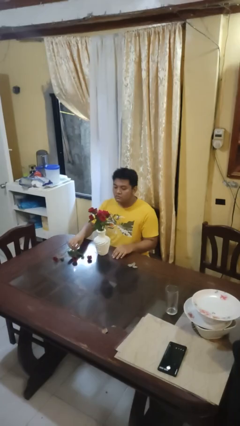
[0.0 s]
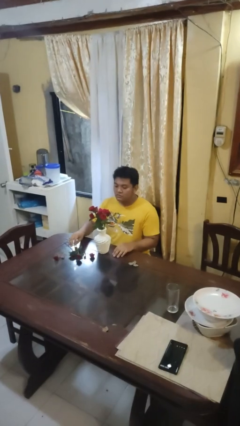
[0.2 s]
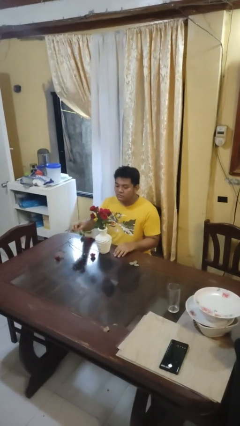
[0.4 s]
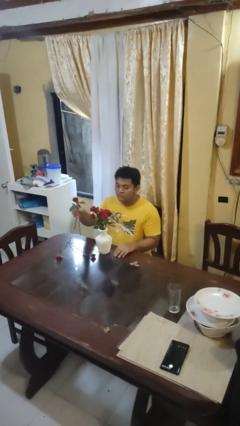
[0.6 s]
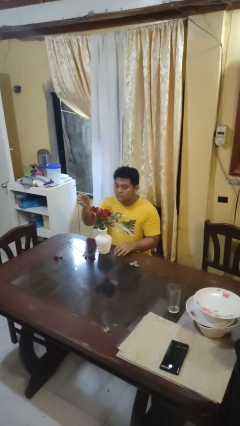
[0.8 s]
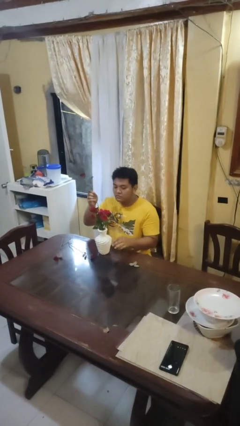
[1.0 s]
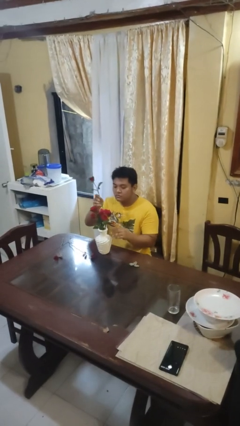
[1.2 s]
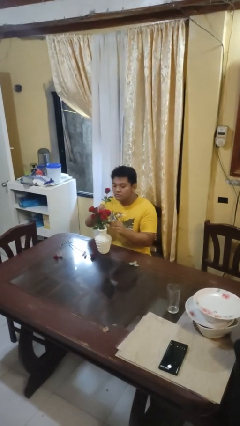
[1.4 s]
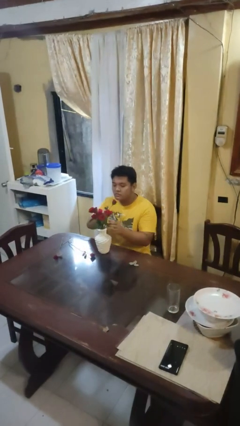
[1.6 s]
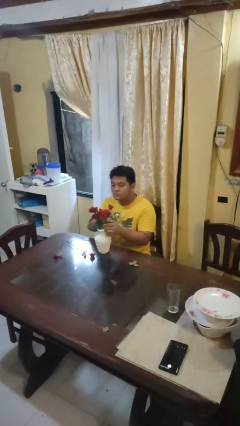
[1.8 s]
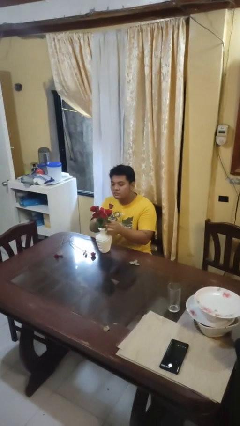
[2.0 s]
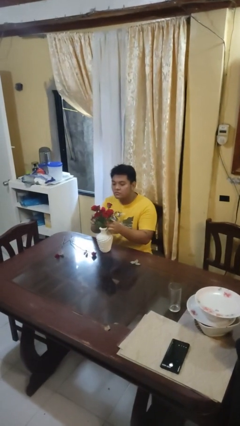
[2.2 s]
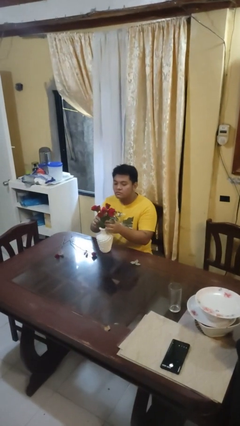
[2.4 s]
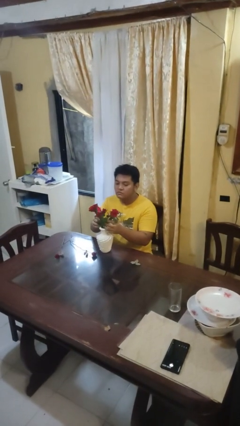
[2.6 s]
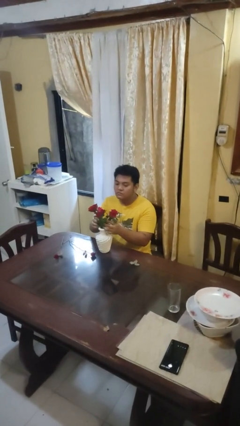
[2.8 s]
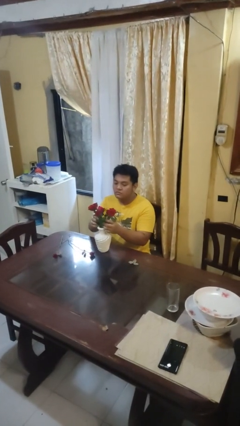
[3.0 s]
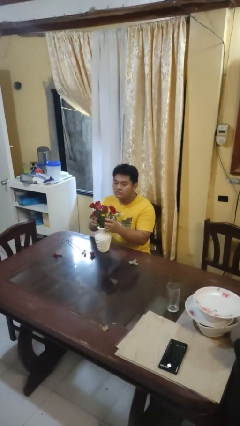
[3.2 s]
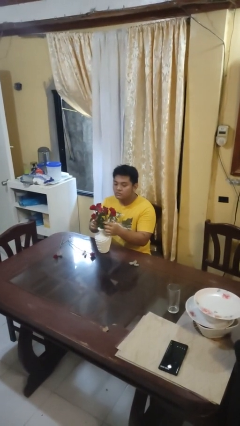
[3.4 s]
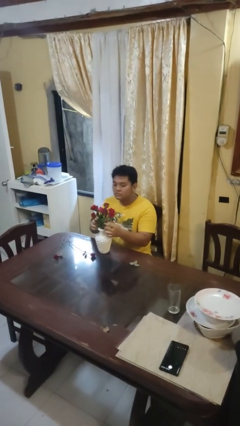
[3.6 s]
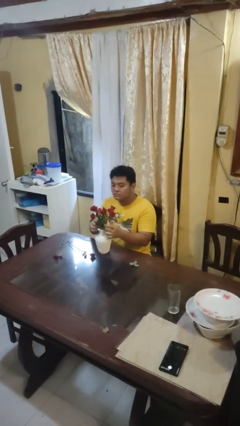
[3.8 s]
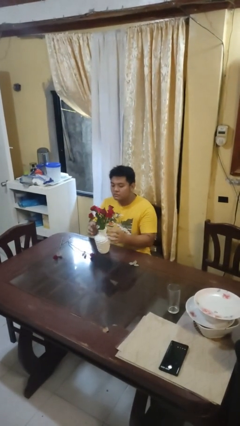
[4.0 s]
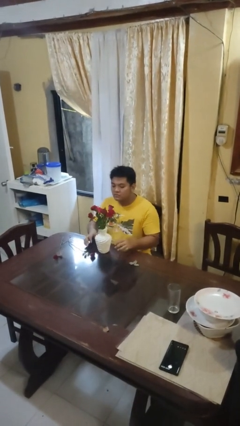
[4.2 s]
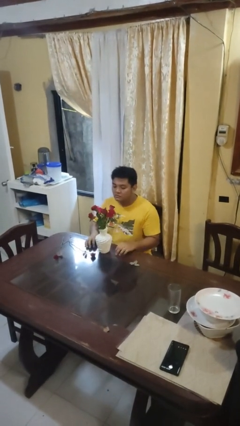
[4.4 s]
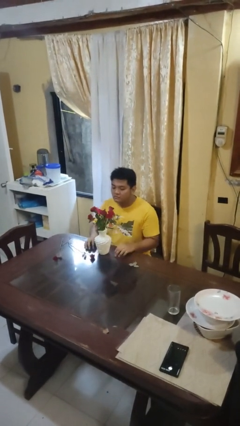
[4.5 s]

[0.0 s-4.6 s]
person arranges flowers in vase

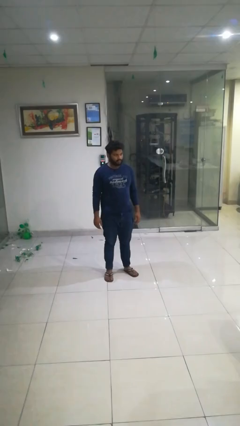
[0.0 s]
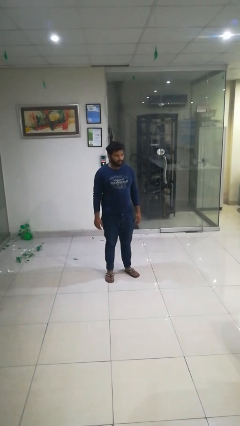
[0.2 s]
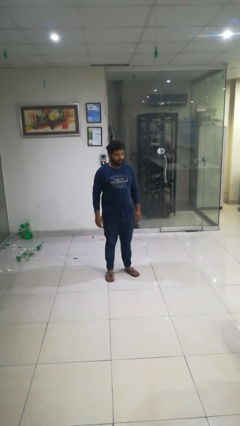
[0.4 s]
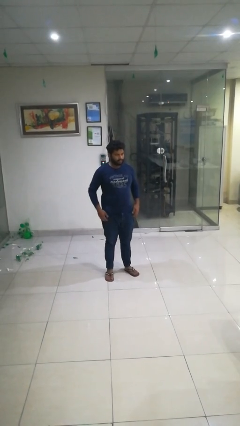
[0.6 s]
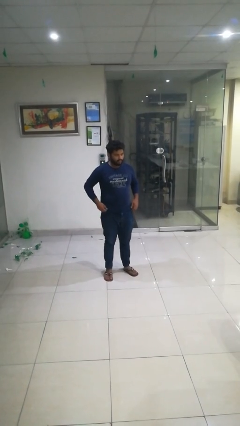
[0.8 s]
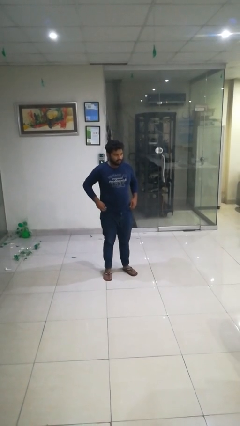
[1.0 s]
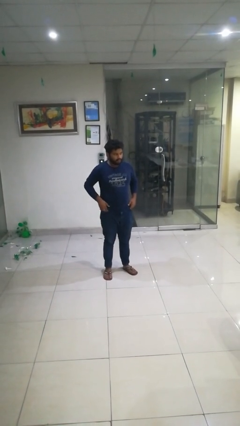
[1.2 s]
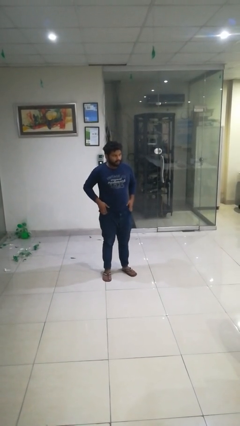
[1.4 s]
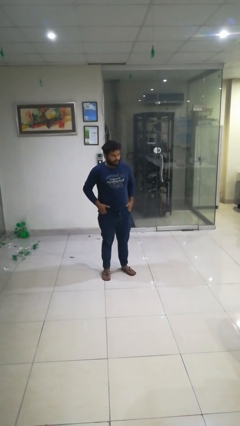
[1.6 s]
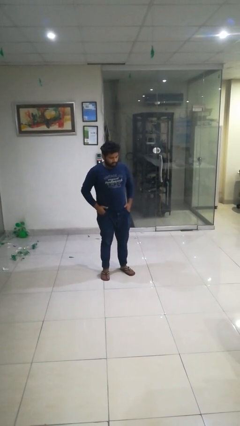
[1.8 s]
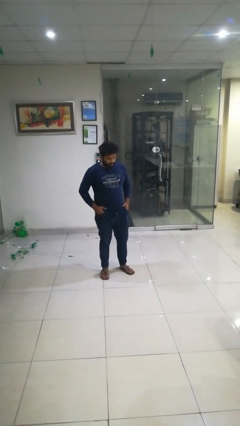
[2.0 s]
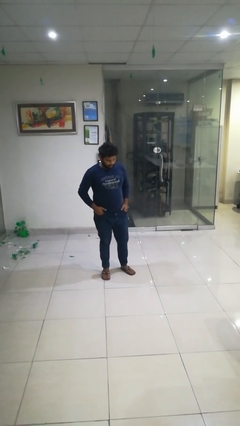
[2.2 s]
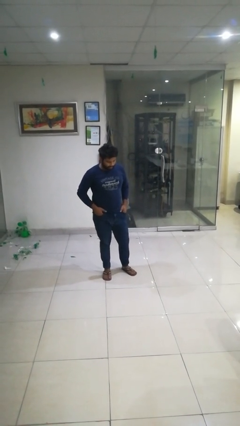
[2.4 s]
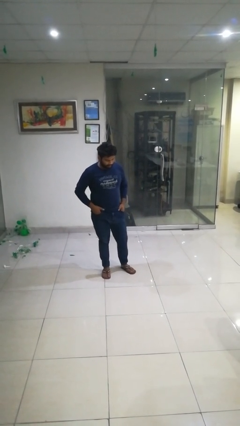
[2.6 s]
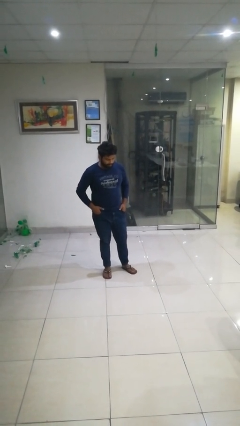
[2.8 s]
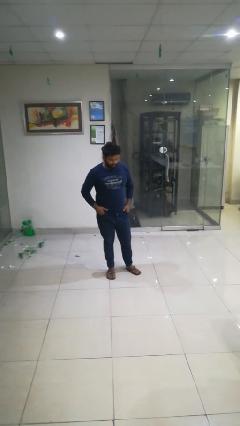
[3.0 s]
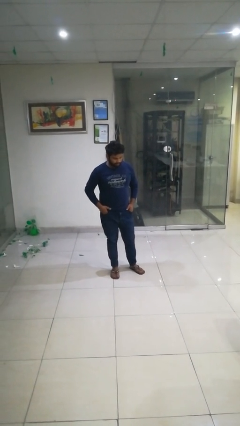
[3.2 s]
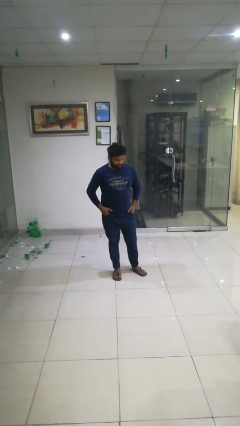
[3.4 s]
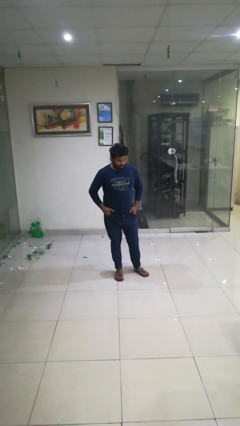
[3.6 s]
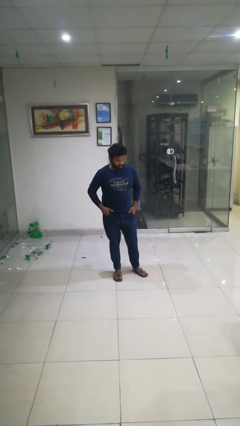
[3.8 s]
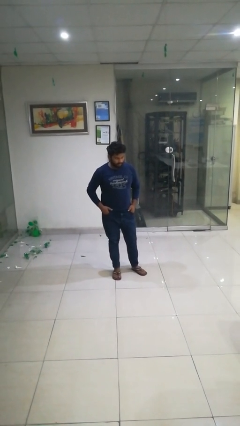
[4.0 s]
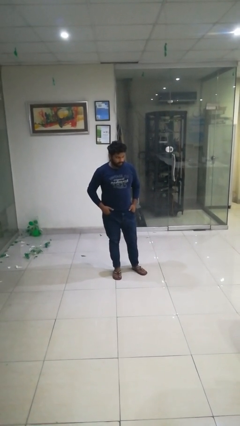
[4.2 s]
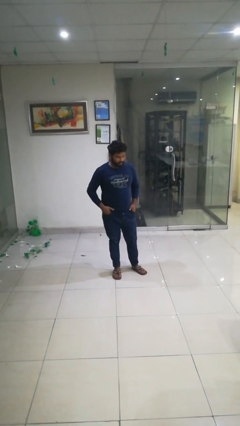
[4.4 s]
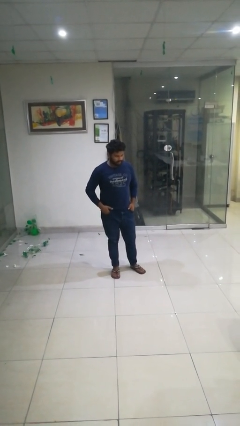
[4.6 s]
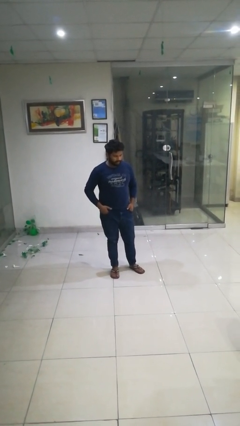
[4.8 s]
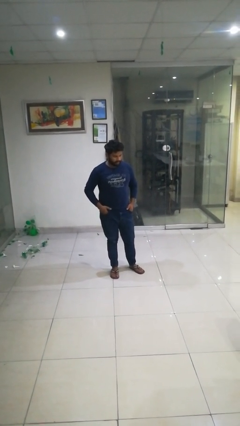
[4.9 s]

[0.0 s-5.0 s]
person puts hands in back pockets

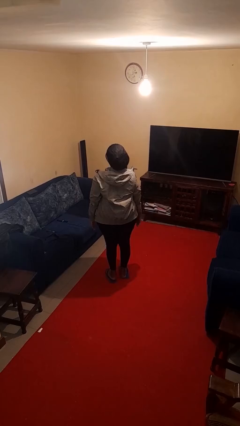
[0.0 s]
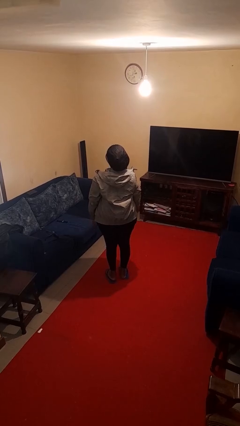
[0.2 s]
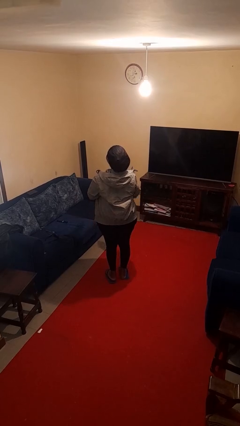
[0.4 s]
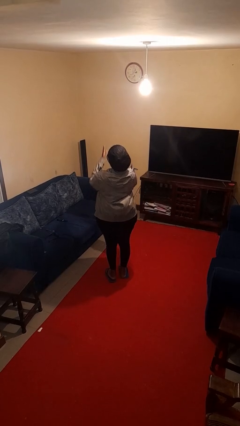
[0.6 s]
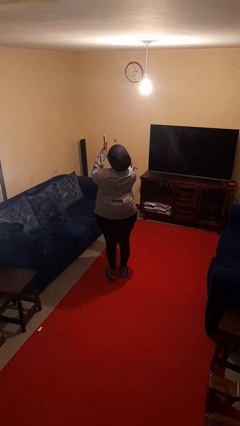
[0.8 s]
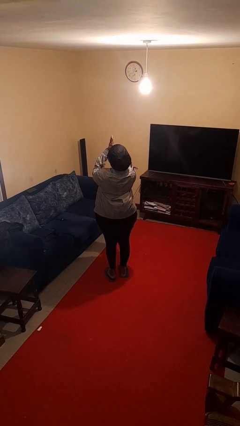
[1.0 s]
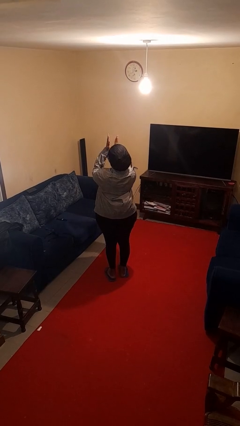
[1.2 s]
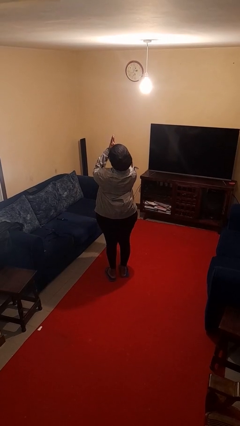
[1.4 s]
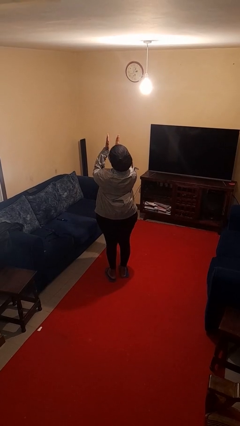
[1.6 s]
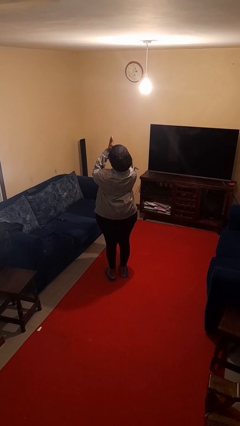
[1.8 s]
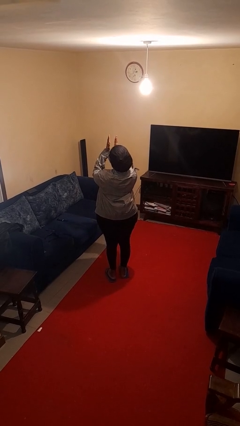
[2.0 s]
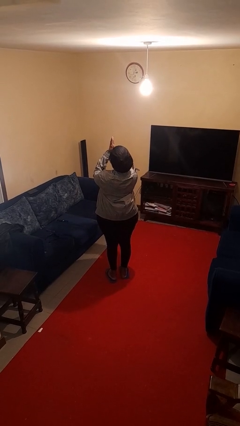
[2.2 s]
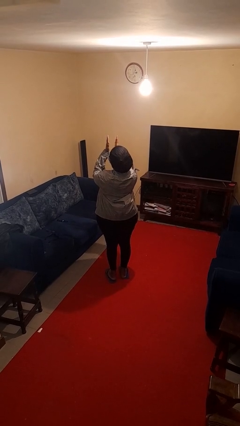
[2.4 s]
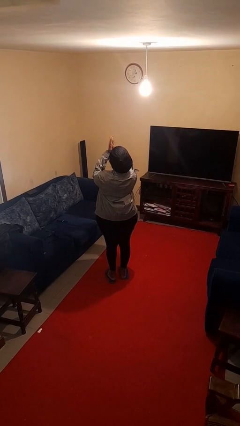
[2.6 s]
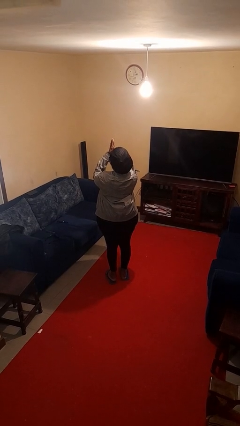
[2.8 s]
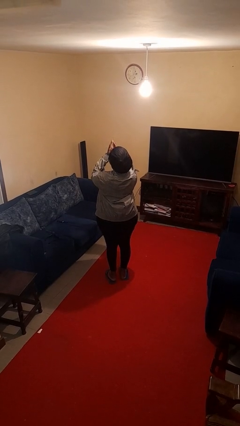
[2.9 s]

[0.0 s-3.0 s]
person claps hands

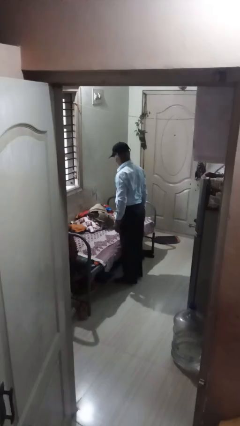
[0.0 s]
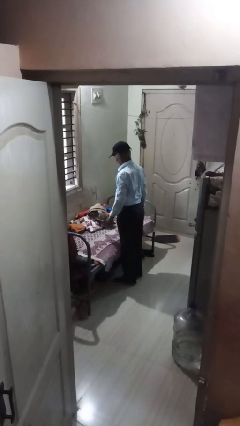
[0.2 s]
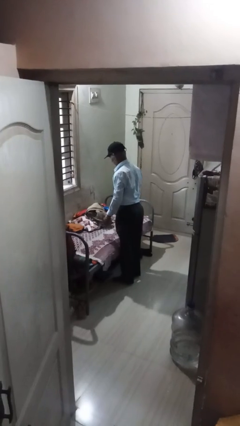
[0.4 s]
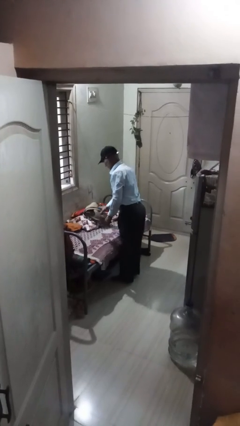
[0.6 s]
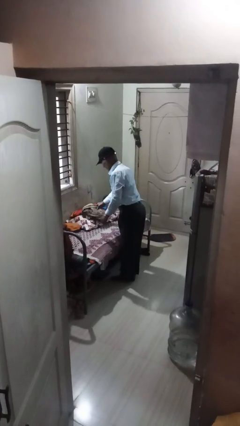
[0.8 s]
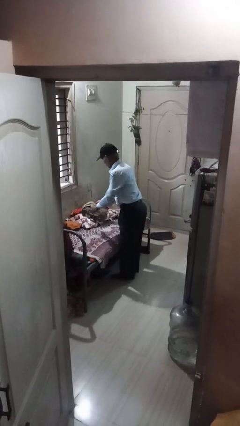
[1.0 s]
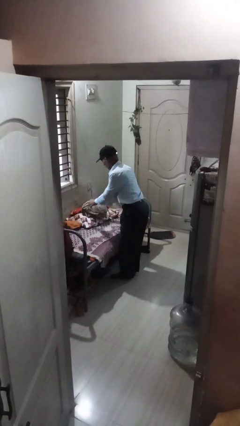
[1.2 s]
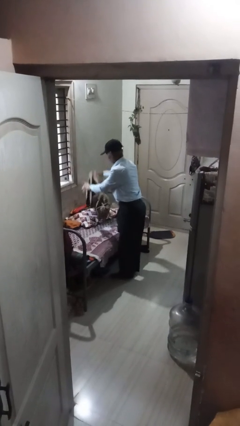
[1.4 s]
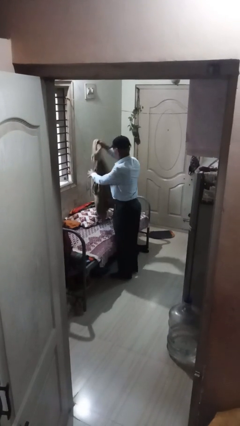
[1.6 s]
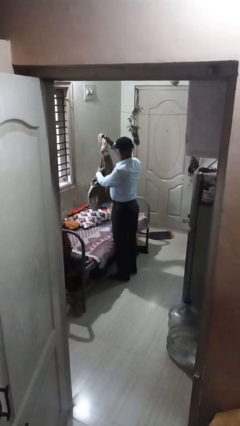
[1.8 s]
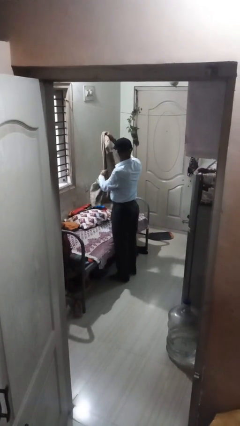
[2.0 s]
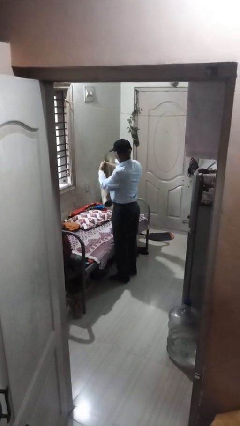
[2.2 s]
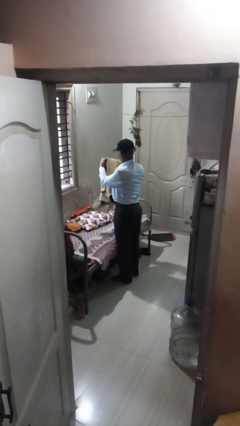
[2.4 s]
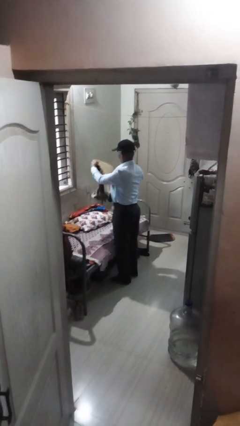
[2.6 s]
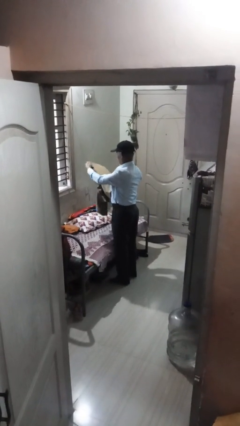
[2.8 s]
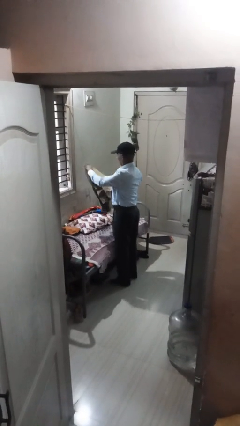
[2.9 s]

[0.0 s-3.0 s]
person folds pants

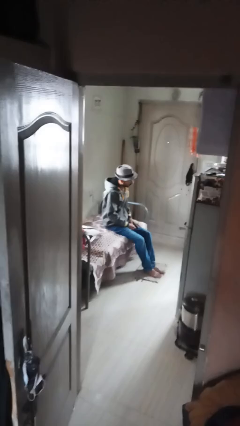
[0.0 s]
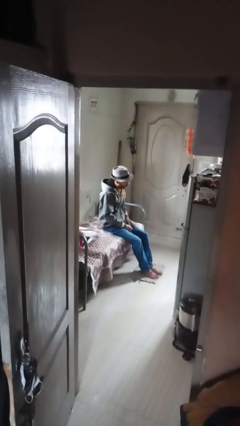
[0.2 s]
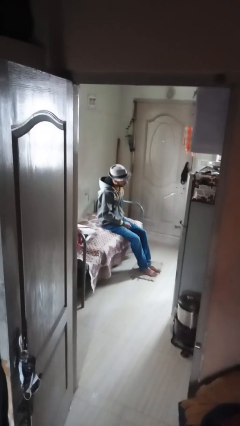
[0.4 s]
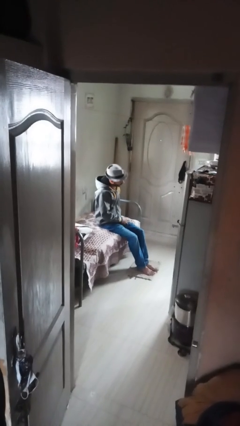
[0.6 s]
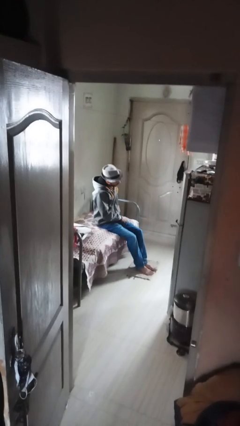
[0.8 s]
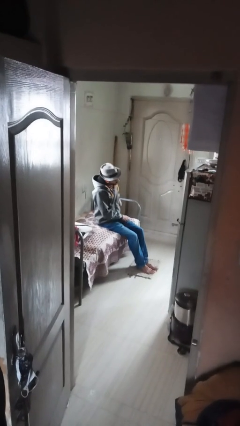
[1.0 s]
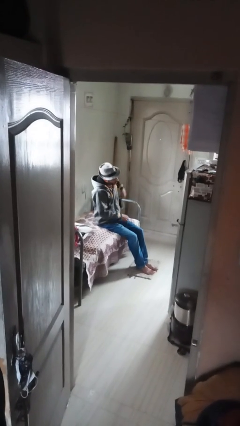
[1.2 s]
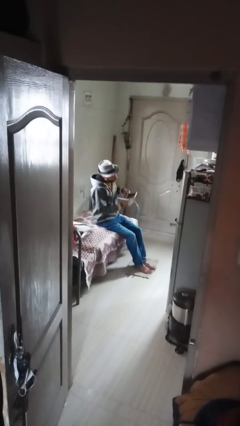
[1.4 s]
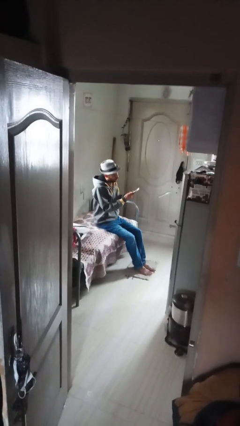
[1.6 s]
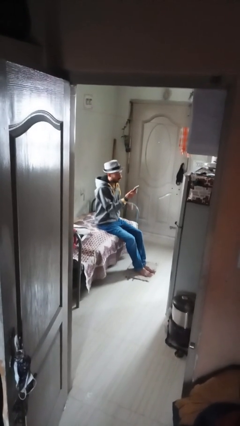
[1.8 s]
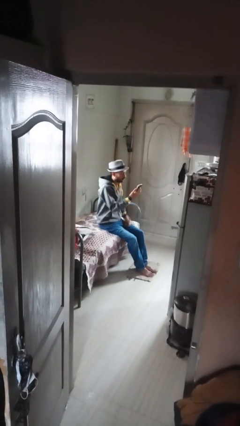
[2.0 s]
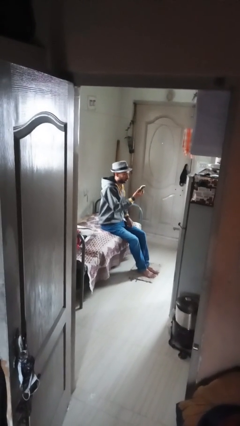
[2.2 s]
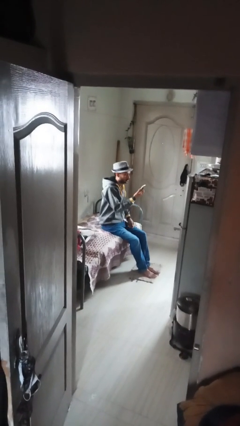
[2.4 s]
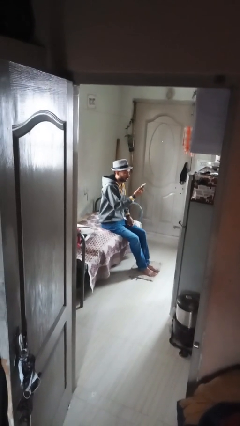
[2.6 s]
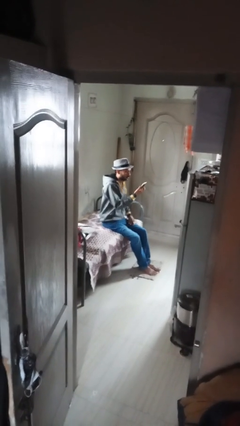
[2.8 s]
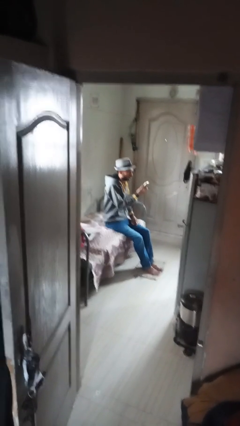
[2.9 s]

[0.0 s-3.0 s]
person takes phone from pocket
